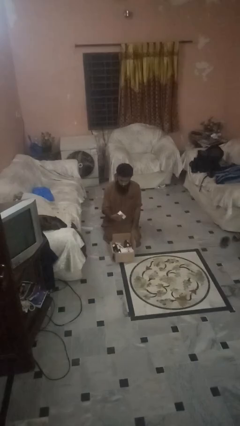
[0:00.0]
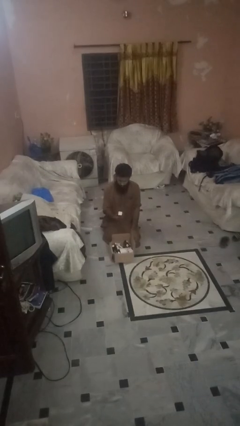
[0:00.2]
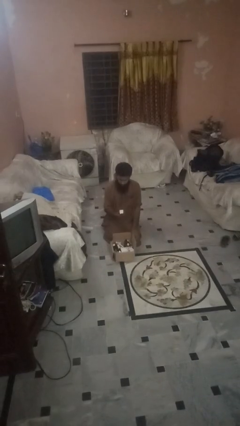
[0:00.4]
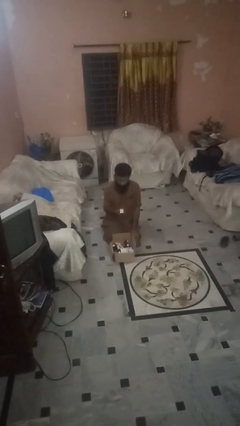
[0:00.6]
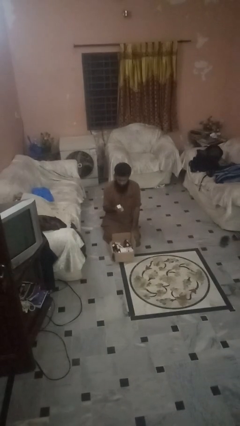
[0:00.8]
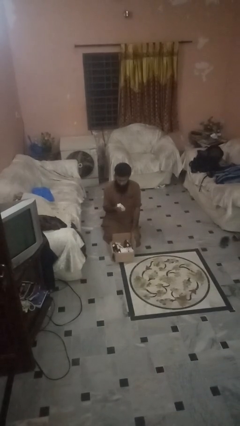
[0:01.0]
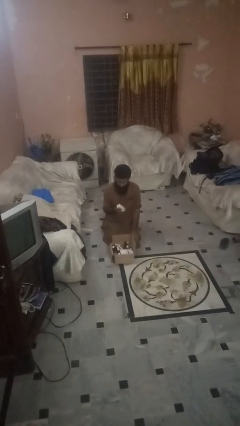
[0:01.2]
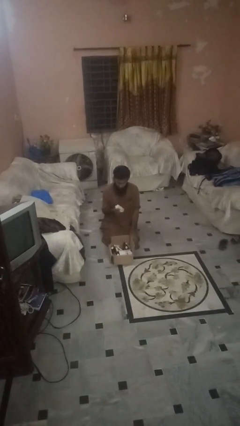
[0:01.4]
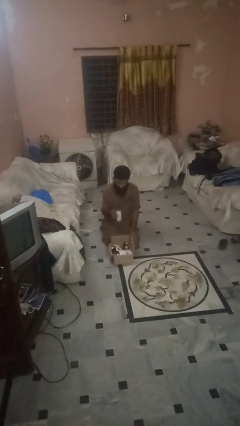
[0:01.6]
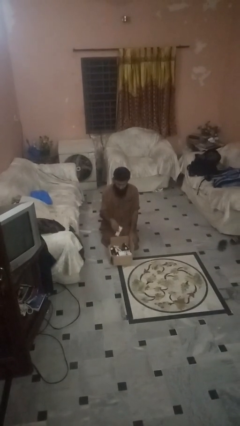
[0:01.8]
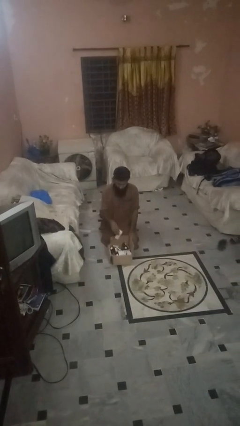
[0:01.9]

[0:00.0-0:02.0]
person puts object into box

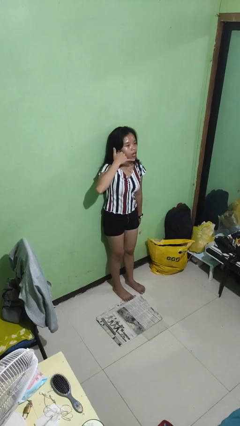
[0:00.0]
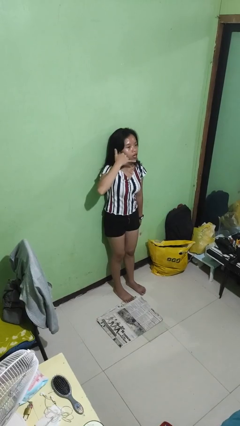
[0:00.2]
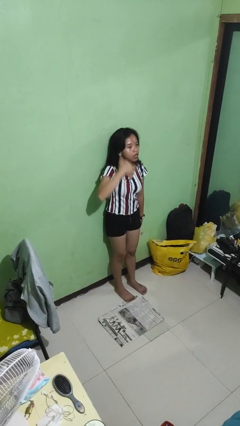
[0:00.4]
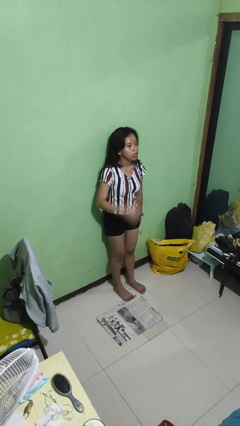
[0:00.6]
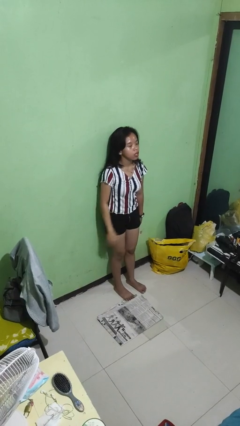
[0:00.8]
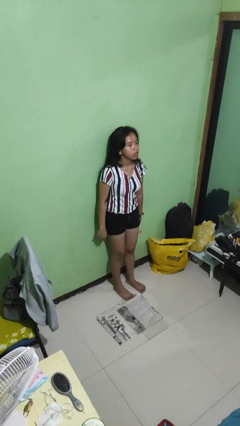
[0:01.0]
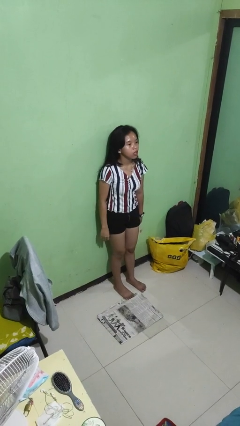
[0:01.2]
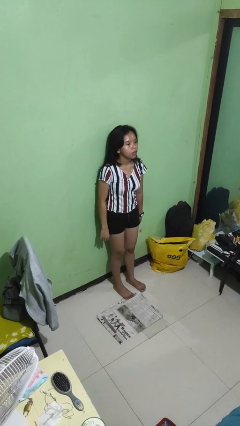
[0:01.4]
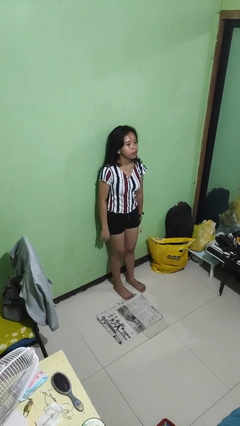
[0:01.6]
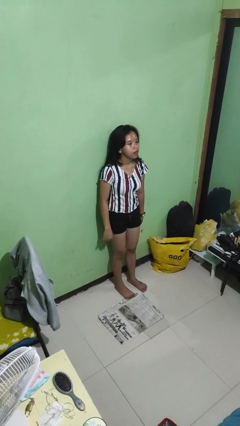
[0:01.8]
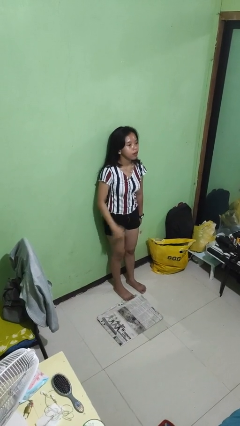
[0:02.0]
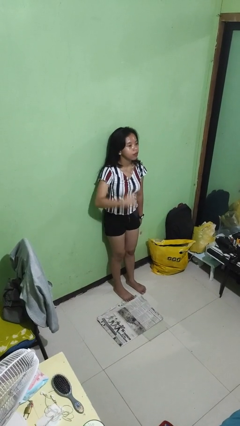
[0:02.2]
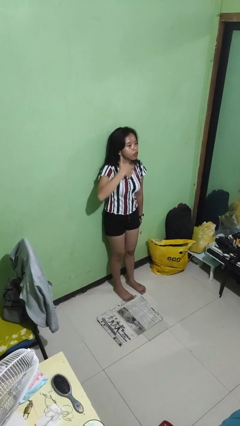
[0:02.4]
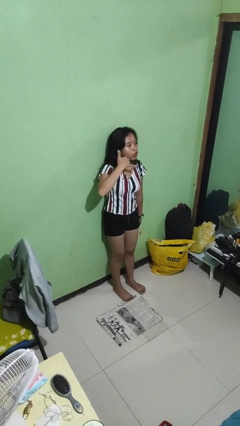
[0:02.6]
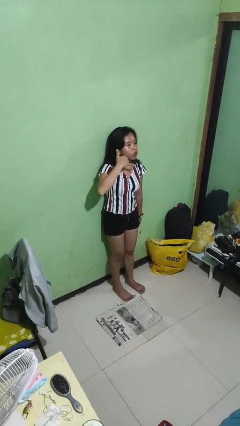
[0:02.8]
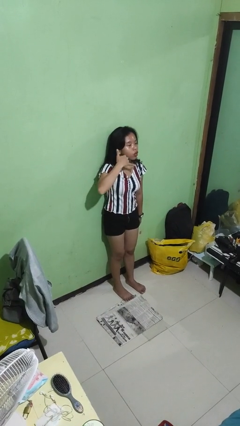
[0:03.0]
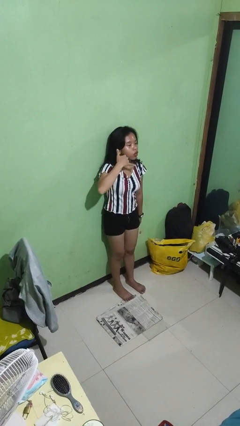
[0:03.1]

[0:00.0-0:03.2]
person throws object into air

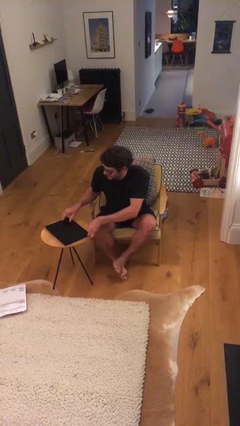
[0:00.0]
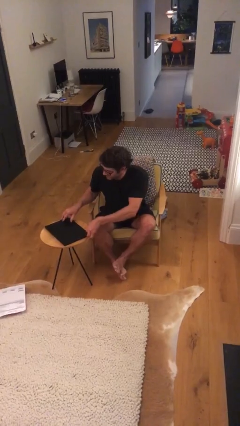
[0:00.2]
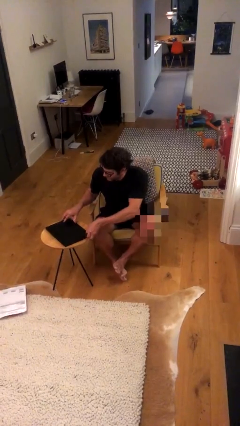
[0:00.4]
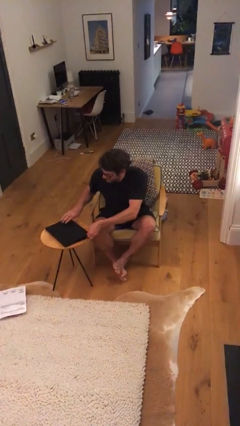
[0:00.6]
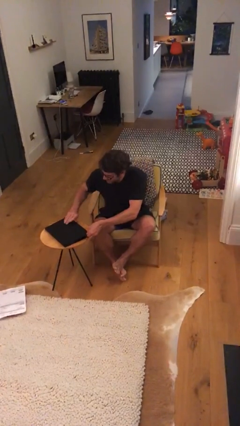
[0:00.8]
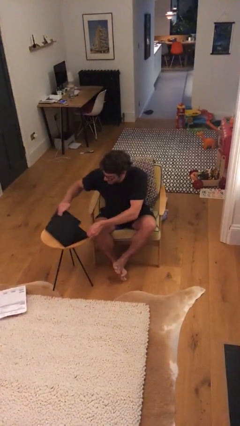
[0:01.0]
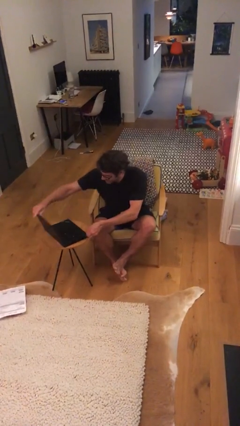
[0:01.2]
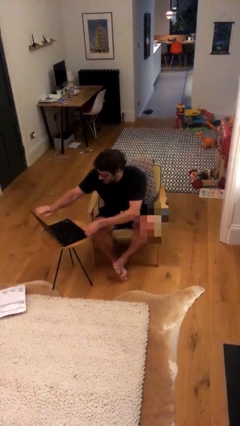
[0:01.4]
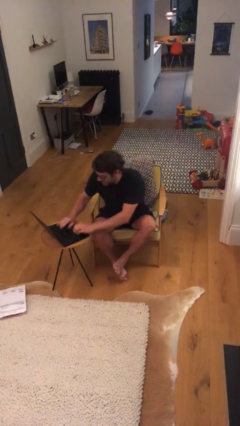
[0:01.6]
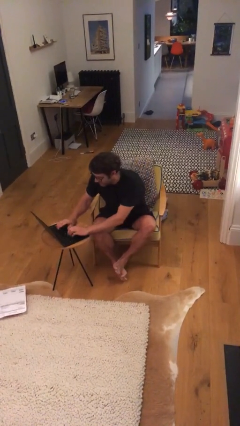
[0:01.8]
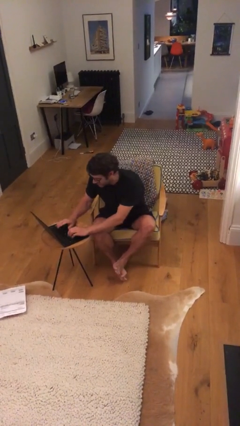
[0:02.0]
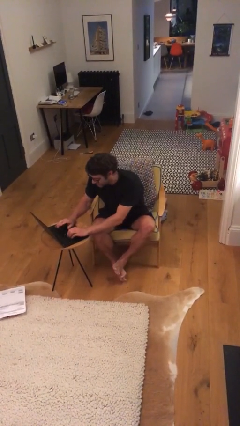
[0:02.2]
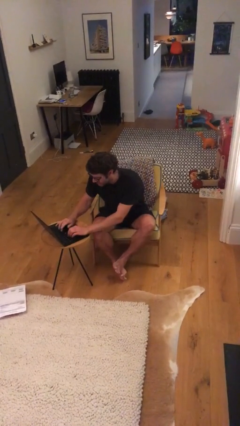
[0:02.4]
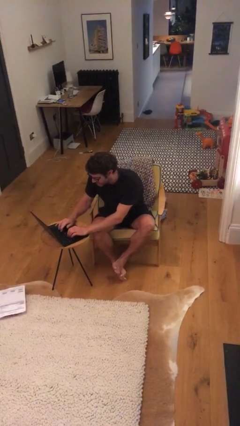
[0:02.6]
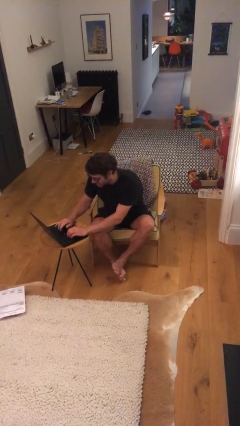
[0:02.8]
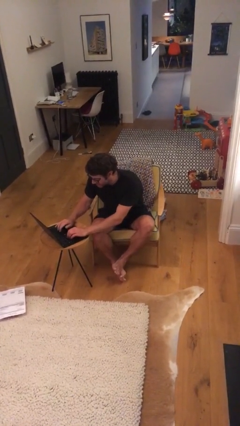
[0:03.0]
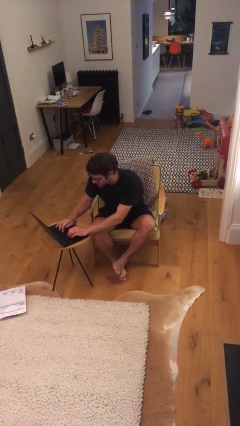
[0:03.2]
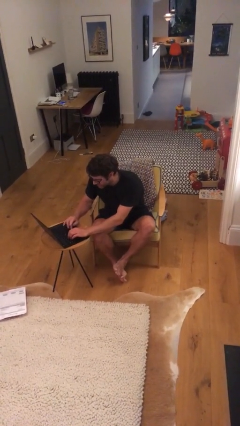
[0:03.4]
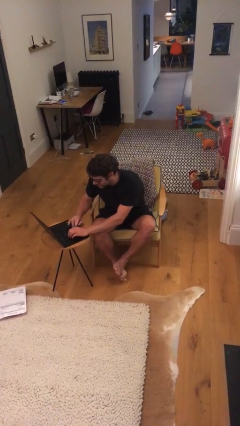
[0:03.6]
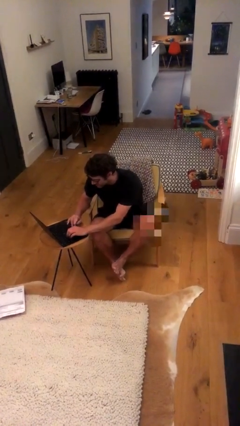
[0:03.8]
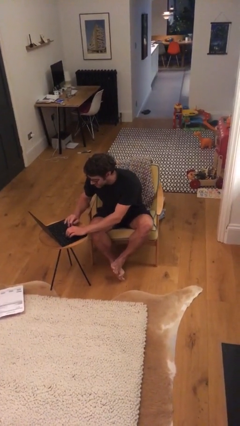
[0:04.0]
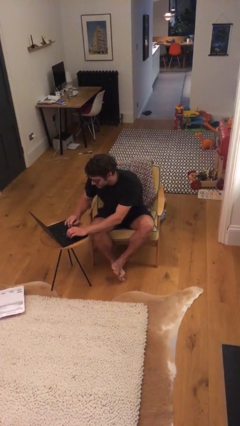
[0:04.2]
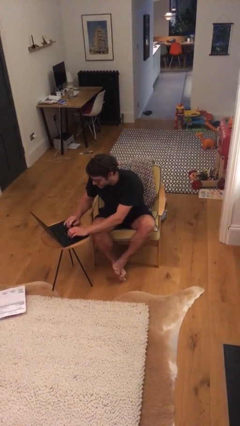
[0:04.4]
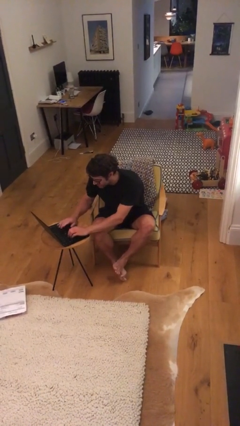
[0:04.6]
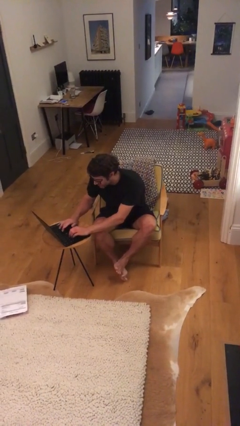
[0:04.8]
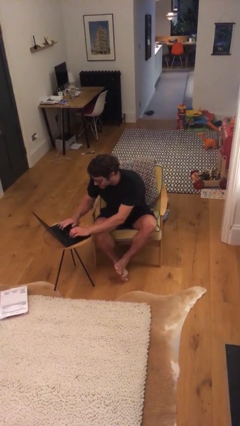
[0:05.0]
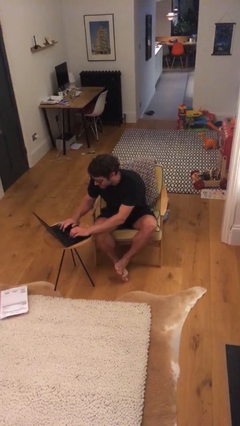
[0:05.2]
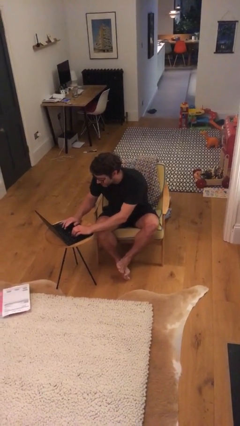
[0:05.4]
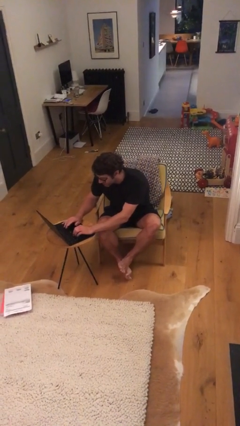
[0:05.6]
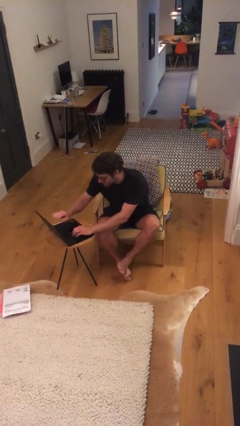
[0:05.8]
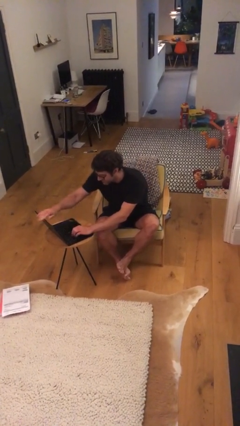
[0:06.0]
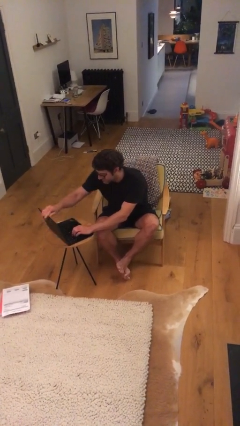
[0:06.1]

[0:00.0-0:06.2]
person interacts with laptop

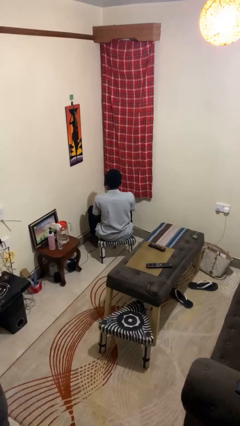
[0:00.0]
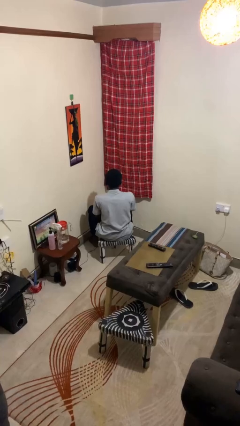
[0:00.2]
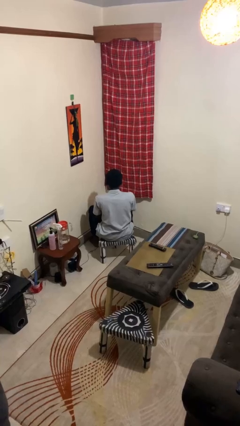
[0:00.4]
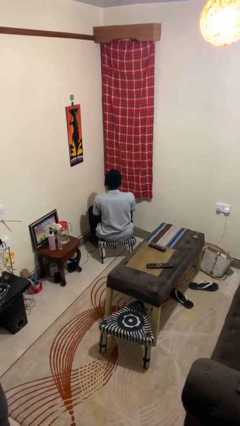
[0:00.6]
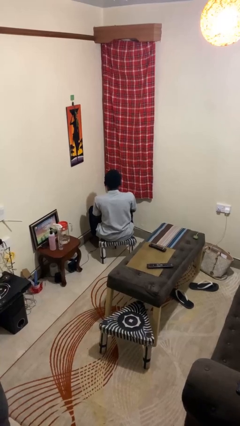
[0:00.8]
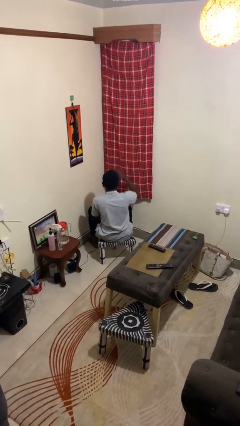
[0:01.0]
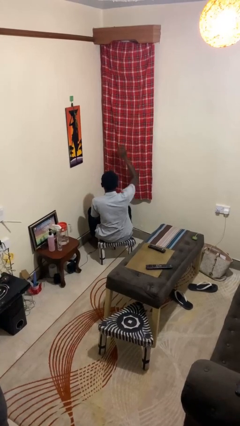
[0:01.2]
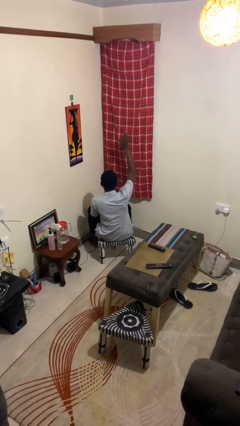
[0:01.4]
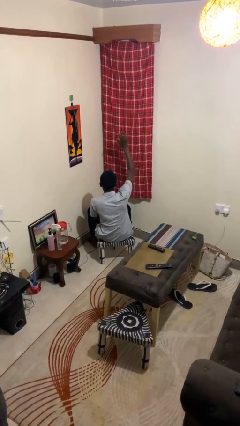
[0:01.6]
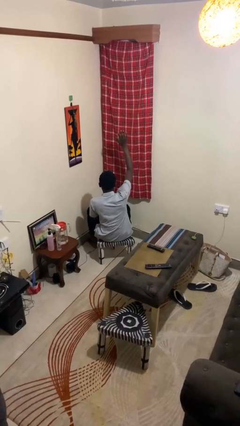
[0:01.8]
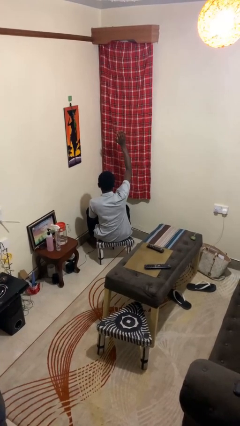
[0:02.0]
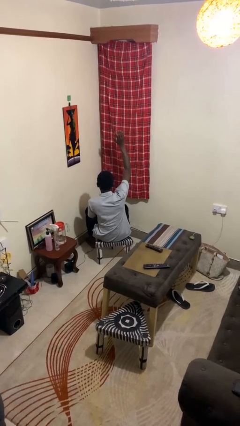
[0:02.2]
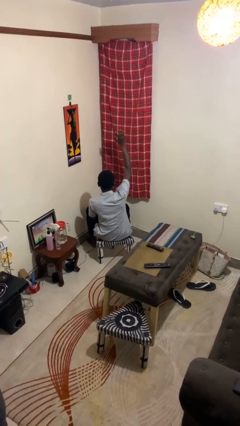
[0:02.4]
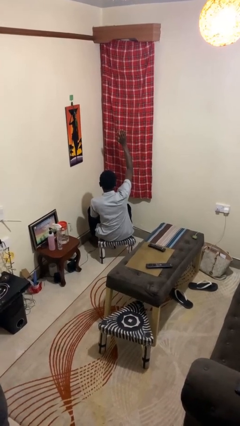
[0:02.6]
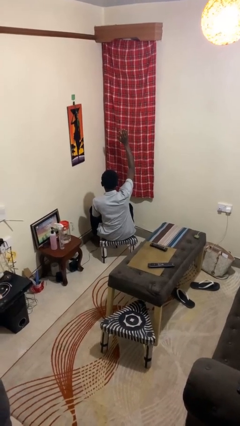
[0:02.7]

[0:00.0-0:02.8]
person gestures raise hand

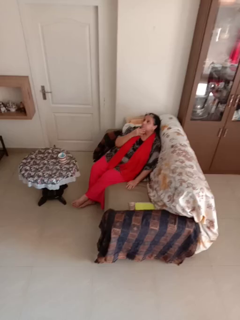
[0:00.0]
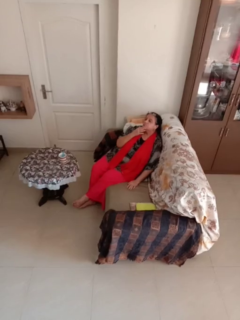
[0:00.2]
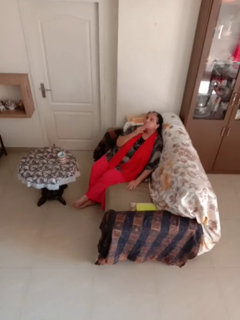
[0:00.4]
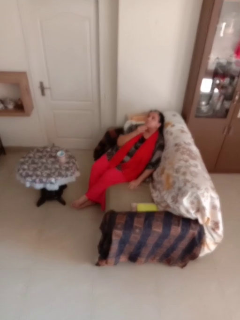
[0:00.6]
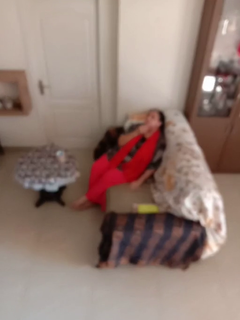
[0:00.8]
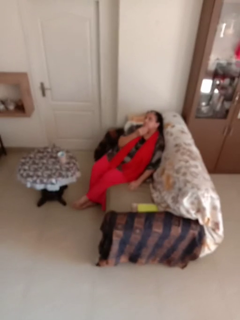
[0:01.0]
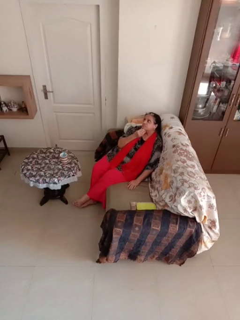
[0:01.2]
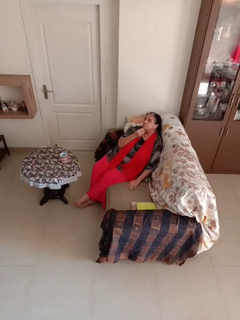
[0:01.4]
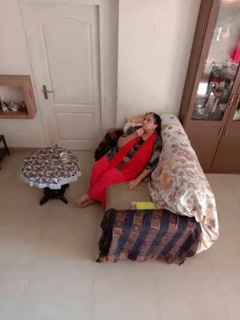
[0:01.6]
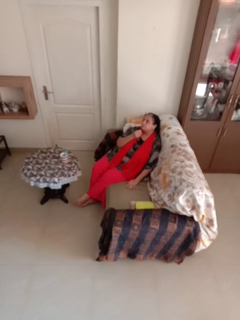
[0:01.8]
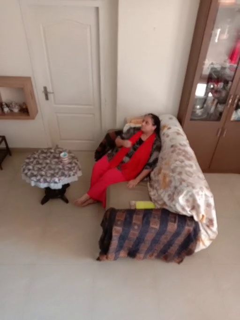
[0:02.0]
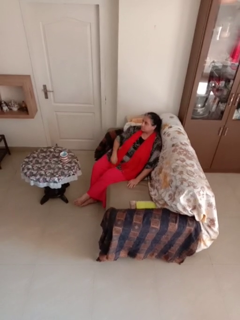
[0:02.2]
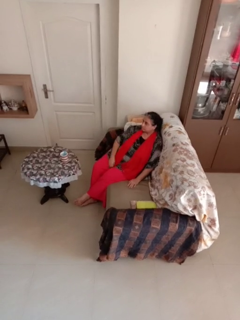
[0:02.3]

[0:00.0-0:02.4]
person strokes chin

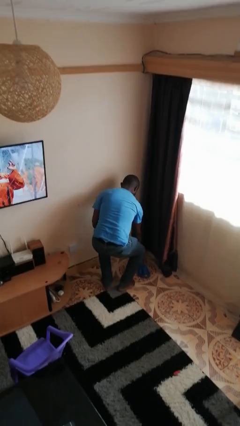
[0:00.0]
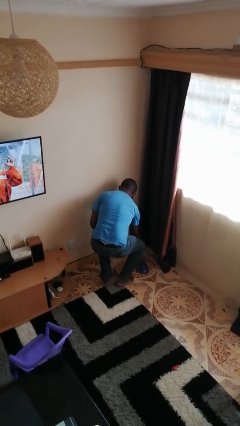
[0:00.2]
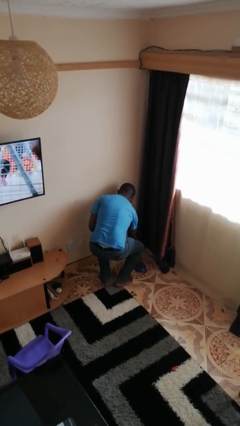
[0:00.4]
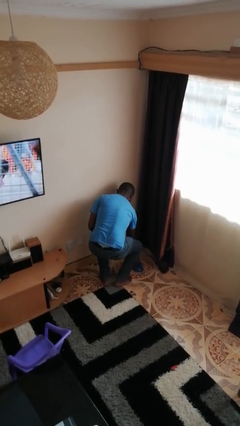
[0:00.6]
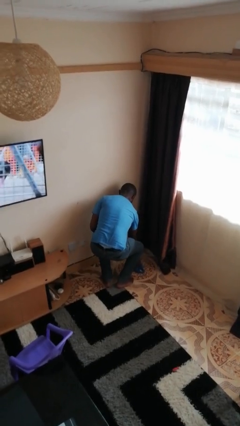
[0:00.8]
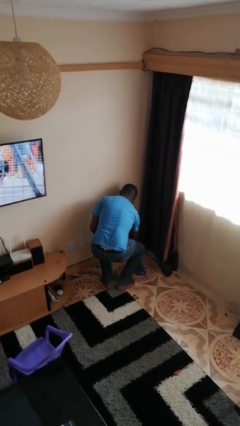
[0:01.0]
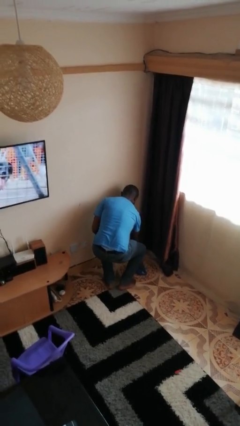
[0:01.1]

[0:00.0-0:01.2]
person picks up object from floor

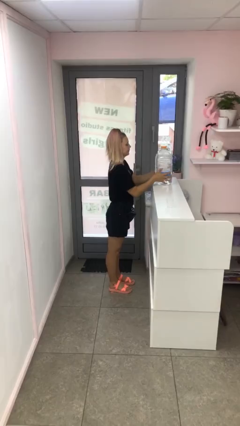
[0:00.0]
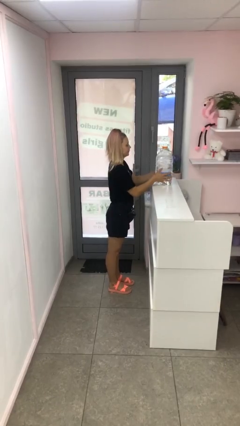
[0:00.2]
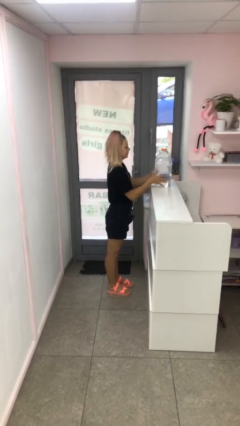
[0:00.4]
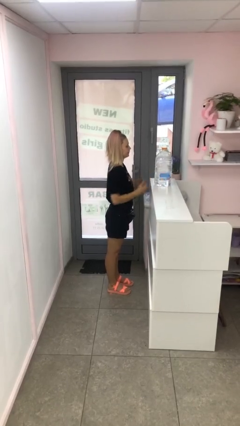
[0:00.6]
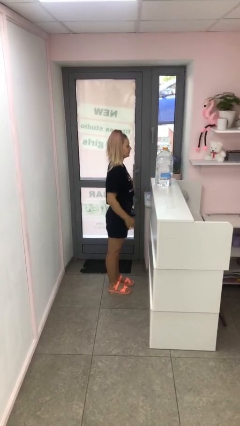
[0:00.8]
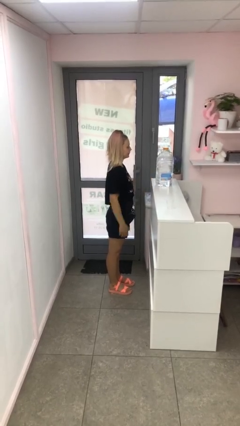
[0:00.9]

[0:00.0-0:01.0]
person puts down object on countertop
